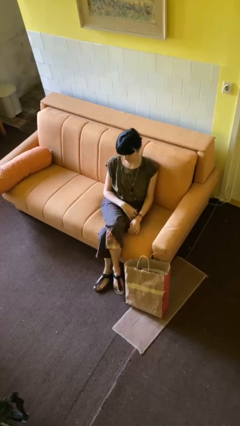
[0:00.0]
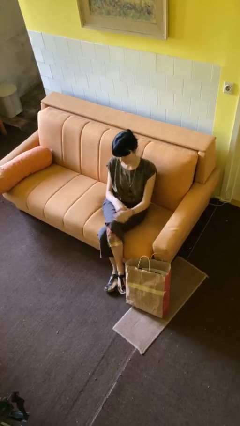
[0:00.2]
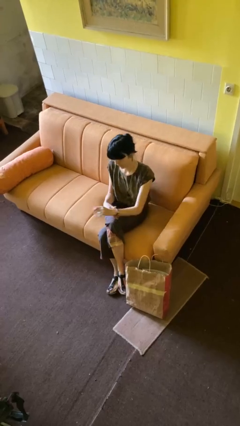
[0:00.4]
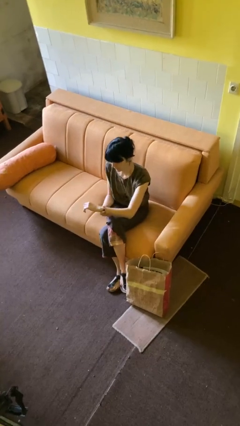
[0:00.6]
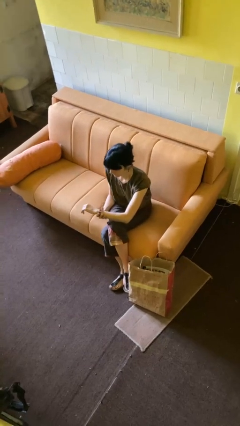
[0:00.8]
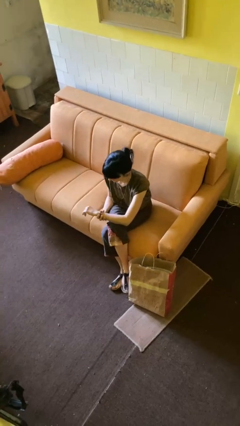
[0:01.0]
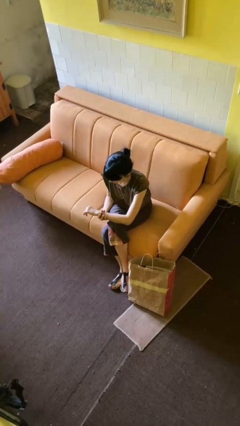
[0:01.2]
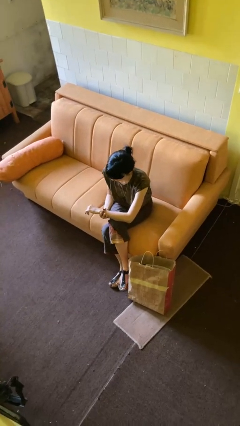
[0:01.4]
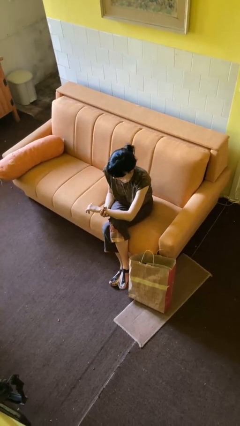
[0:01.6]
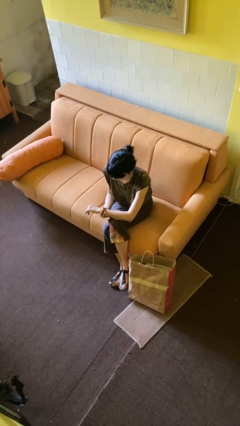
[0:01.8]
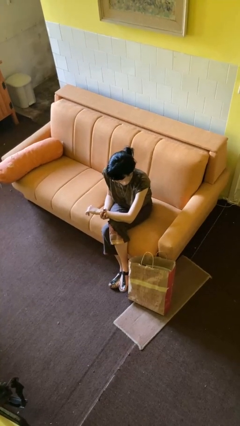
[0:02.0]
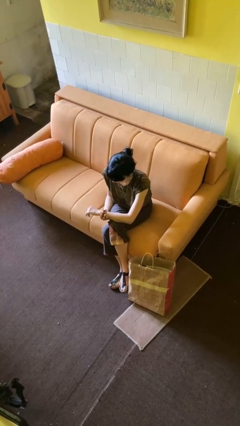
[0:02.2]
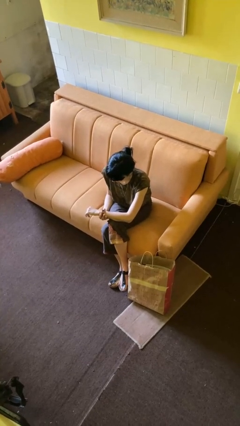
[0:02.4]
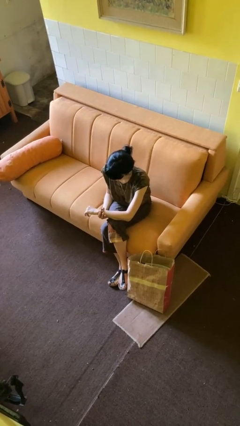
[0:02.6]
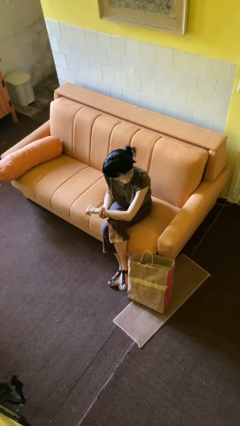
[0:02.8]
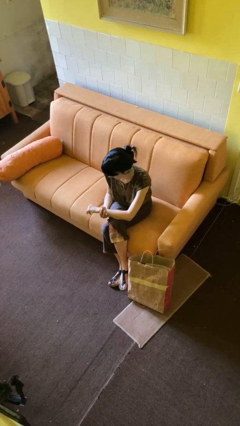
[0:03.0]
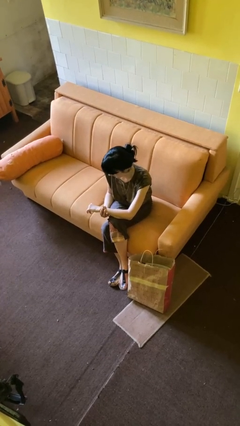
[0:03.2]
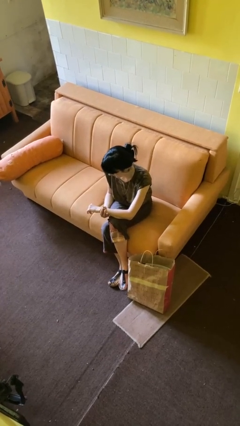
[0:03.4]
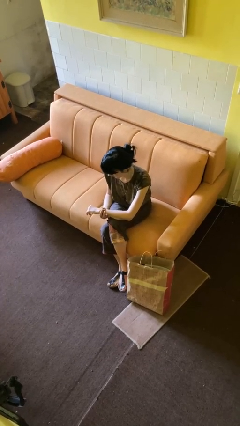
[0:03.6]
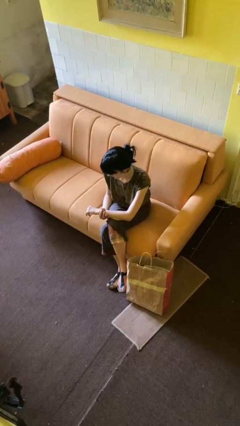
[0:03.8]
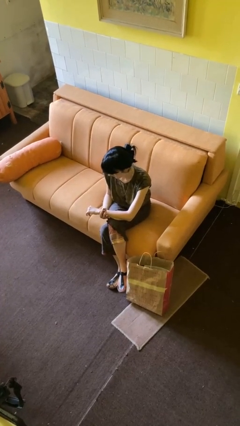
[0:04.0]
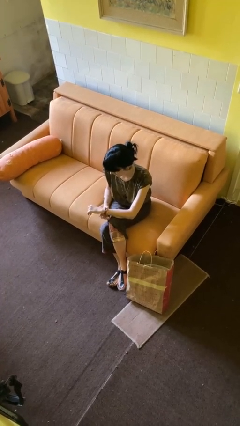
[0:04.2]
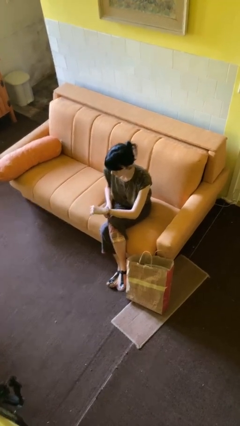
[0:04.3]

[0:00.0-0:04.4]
person looks at wristwatch

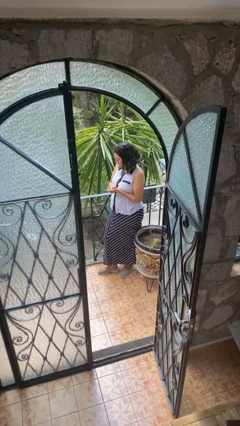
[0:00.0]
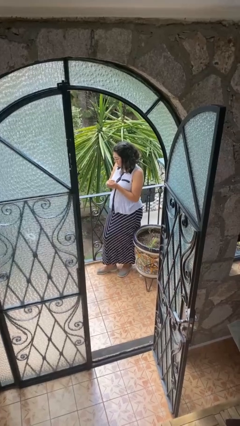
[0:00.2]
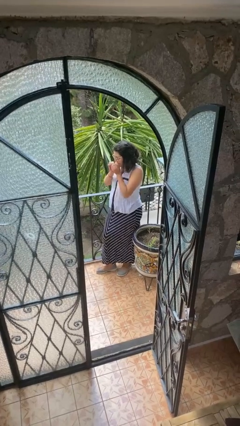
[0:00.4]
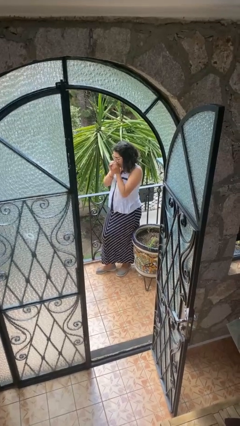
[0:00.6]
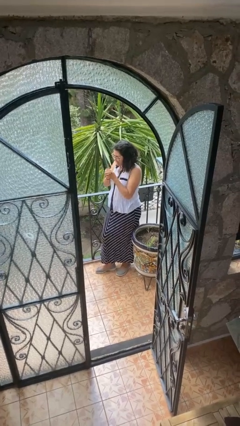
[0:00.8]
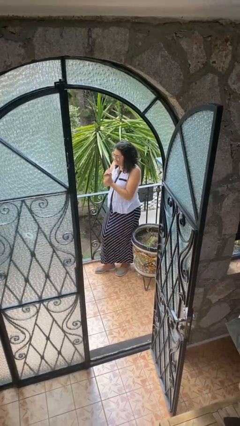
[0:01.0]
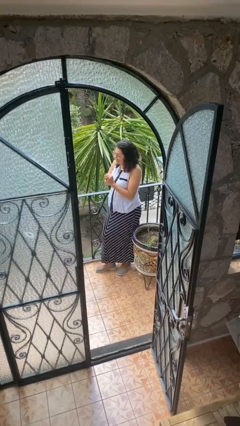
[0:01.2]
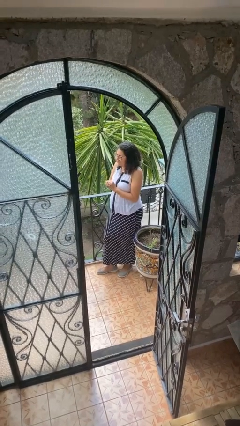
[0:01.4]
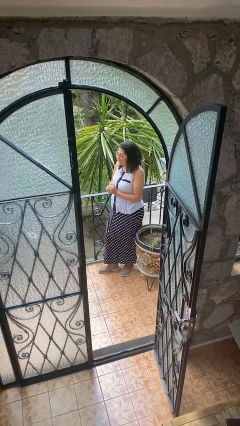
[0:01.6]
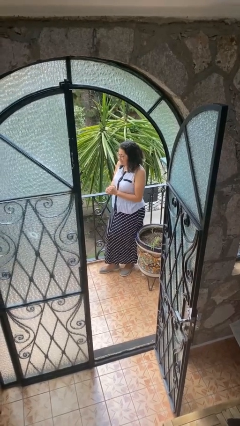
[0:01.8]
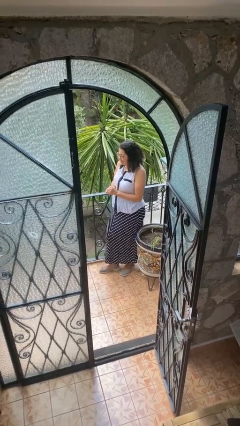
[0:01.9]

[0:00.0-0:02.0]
person blows into hands

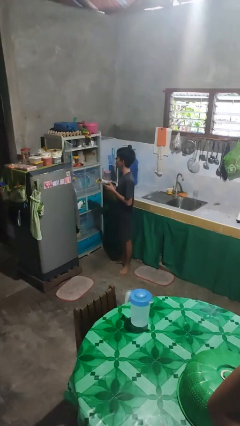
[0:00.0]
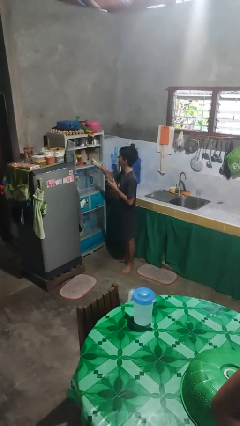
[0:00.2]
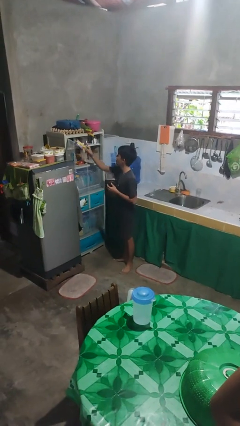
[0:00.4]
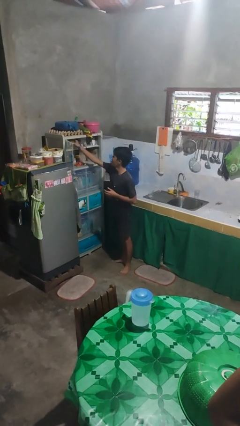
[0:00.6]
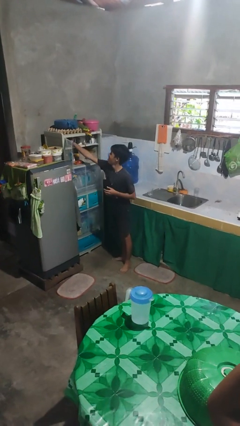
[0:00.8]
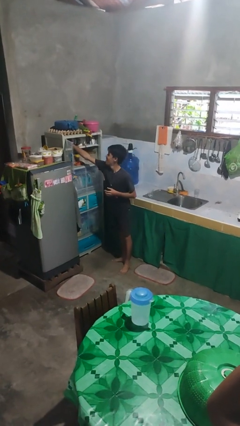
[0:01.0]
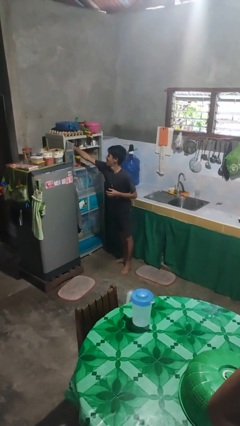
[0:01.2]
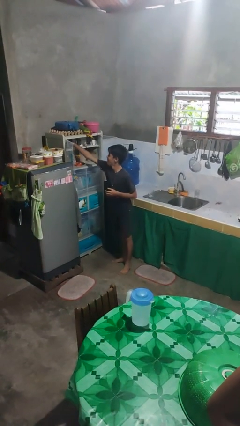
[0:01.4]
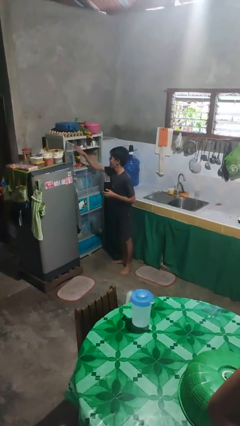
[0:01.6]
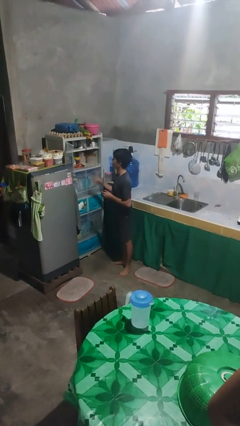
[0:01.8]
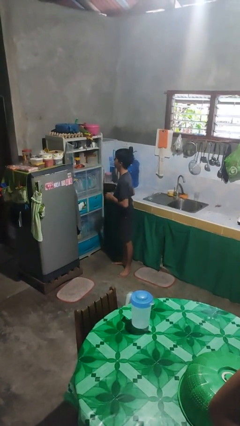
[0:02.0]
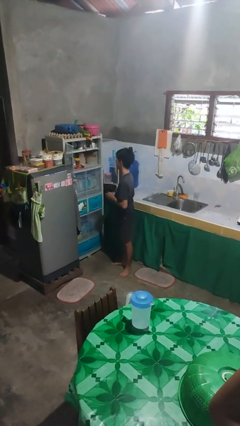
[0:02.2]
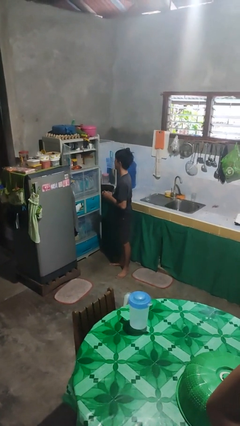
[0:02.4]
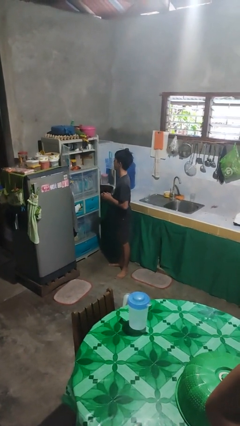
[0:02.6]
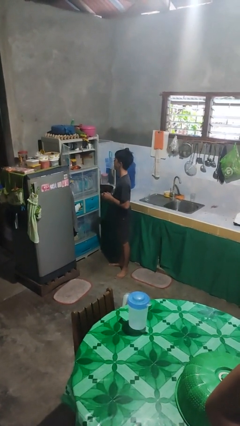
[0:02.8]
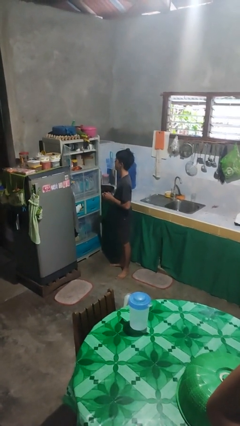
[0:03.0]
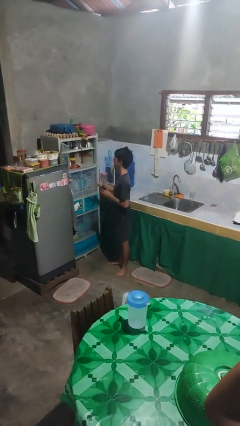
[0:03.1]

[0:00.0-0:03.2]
person puts object in cabinet

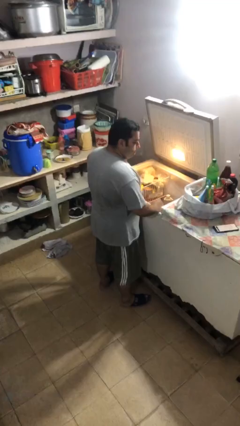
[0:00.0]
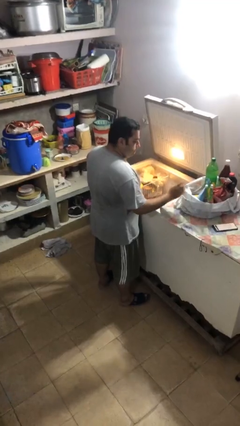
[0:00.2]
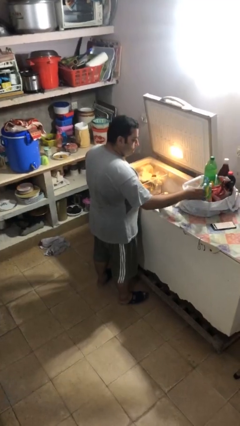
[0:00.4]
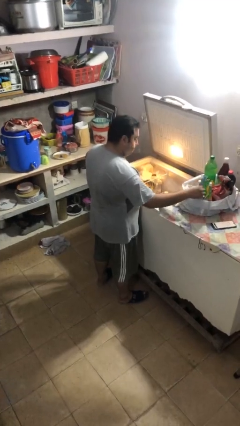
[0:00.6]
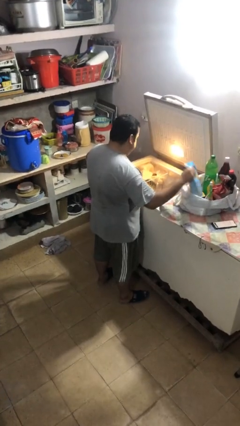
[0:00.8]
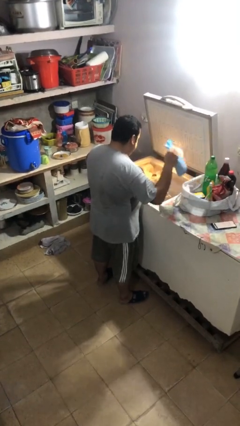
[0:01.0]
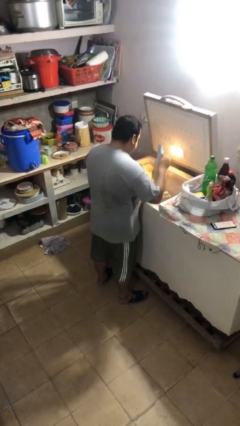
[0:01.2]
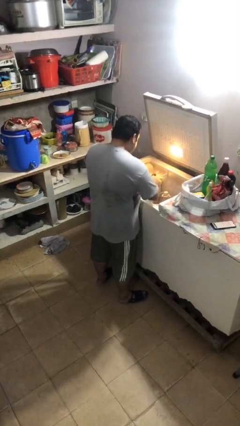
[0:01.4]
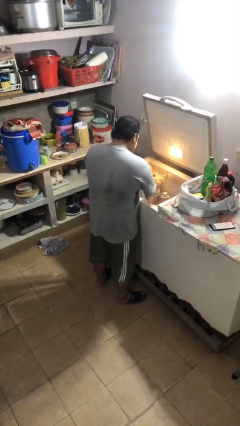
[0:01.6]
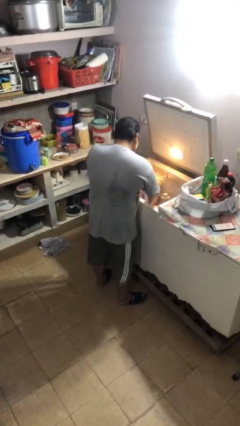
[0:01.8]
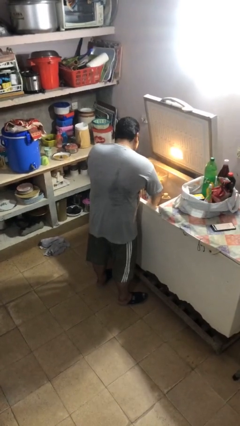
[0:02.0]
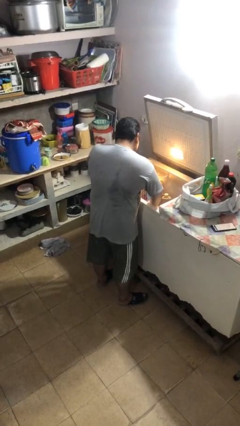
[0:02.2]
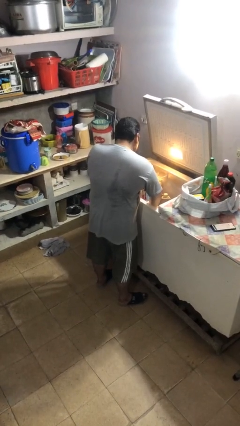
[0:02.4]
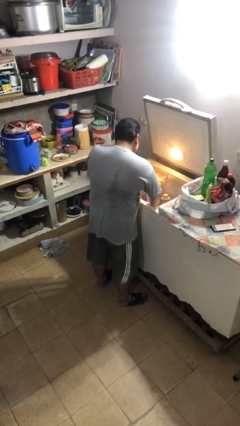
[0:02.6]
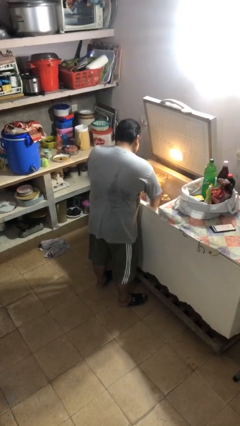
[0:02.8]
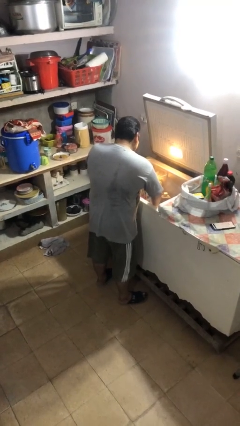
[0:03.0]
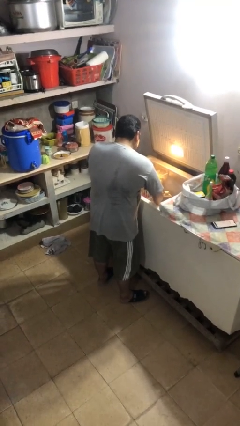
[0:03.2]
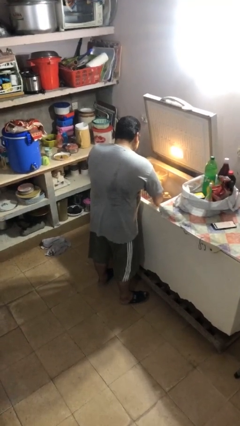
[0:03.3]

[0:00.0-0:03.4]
person loads groceries into refrigerator

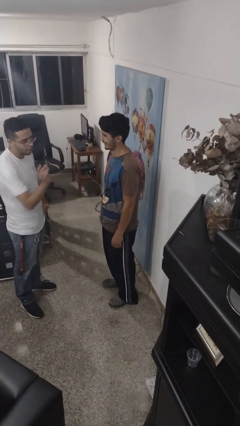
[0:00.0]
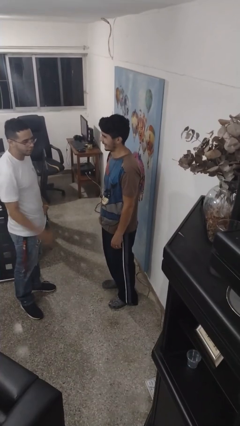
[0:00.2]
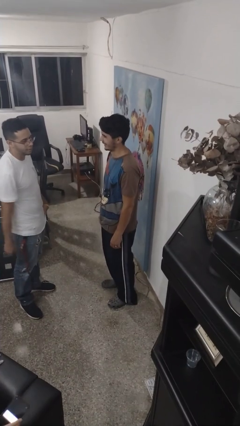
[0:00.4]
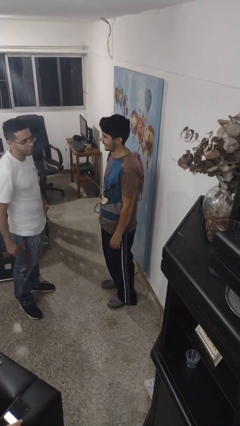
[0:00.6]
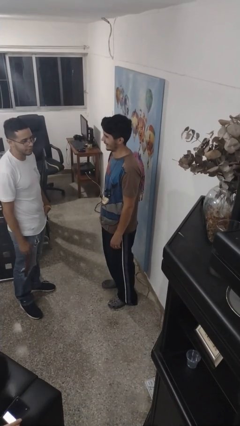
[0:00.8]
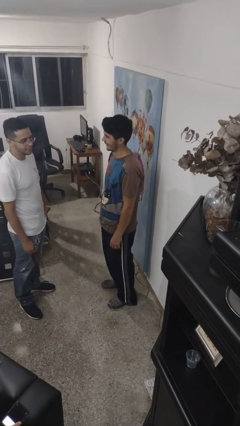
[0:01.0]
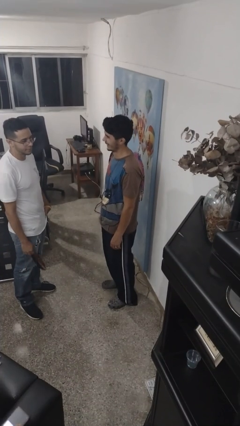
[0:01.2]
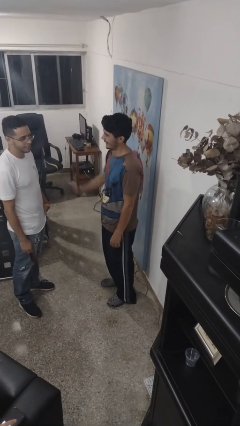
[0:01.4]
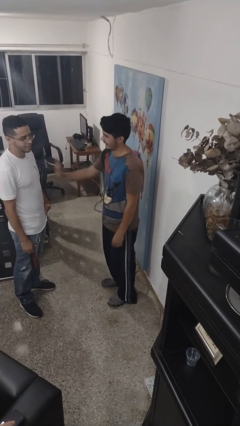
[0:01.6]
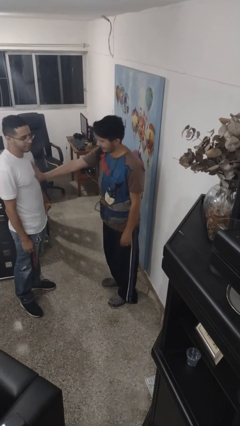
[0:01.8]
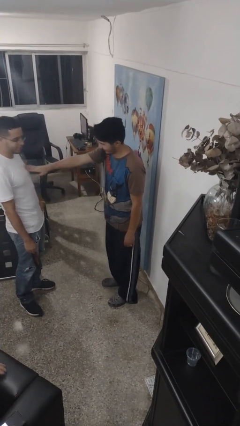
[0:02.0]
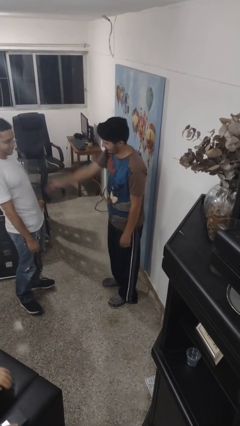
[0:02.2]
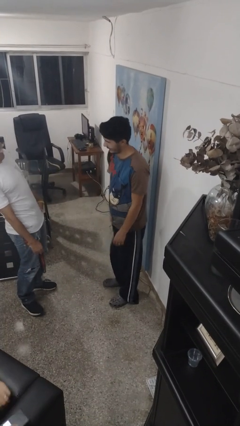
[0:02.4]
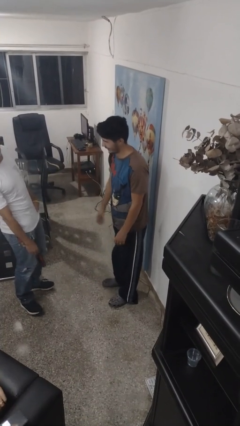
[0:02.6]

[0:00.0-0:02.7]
person shoves person

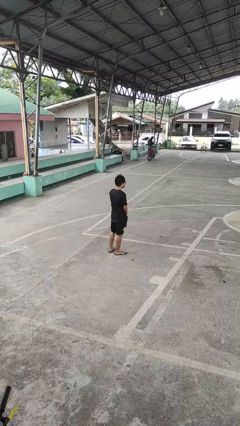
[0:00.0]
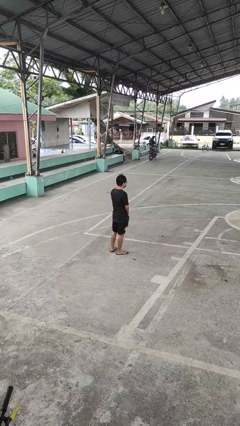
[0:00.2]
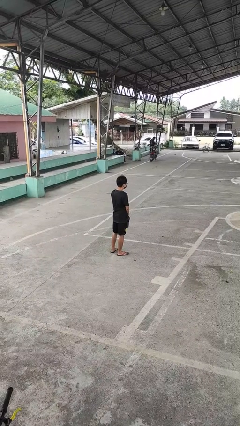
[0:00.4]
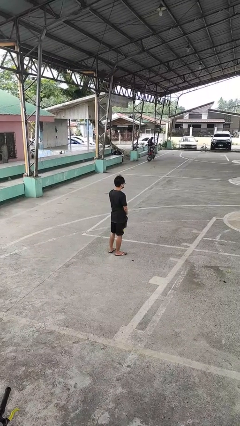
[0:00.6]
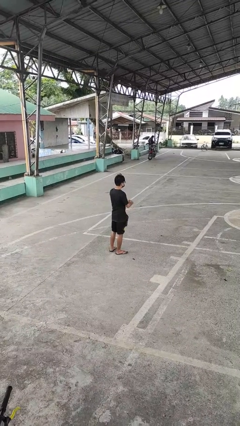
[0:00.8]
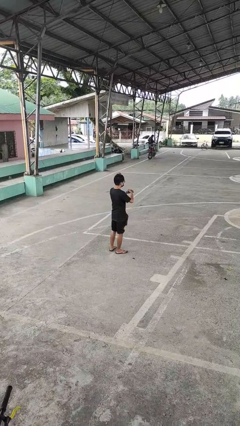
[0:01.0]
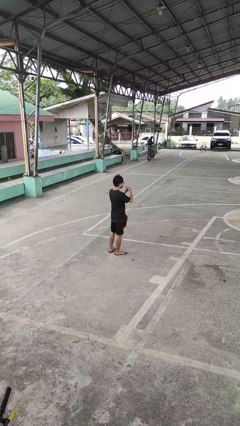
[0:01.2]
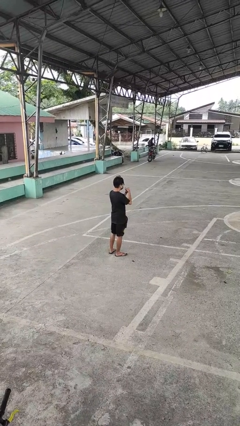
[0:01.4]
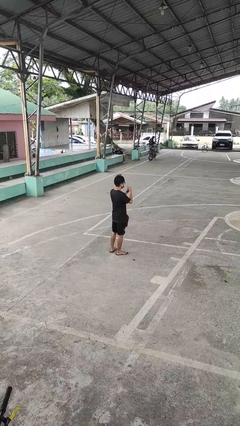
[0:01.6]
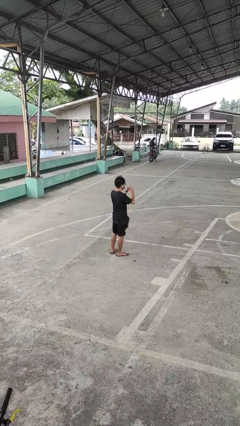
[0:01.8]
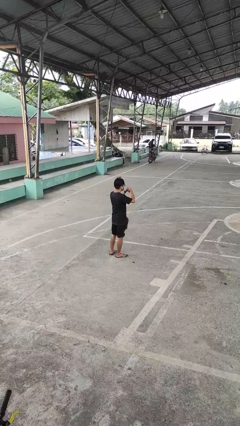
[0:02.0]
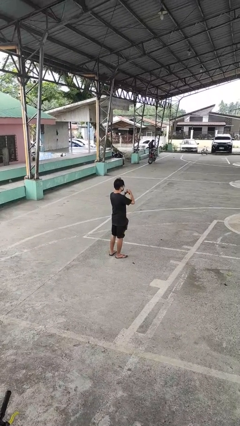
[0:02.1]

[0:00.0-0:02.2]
person cracks knuckles
